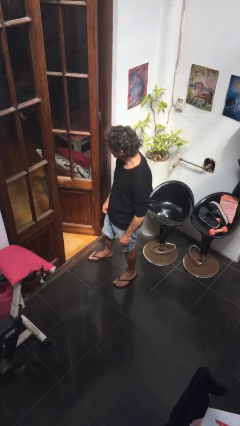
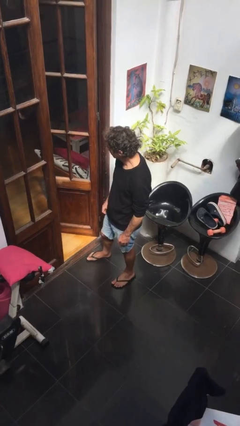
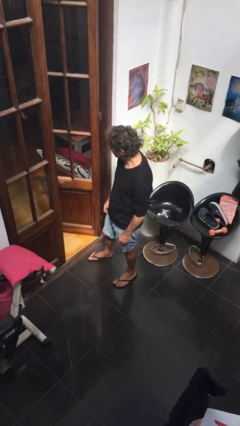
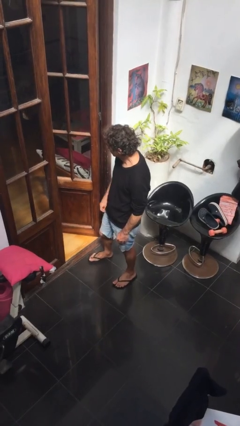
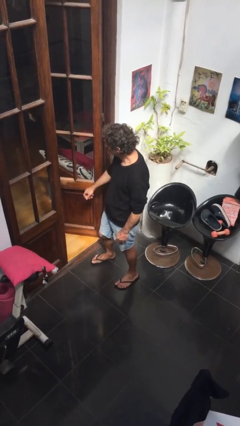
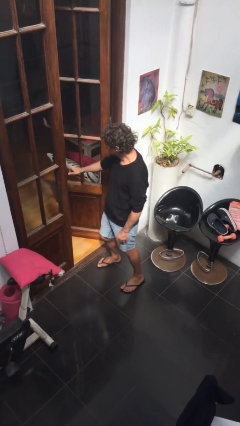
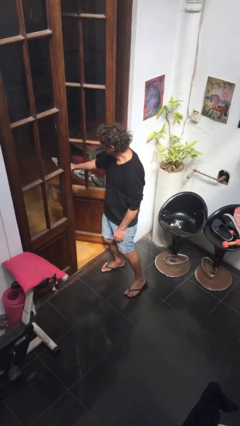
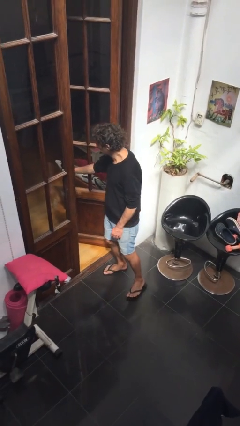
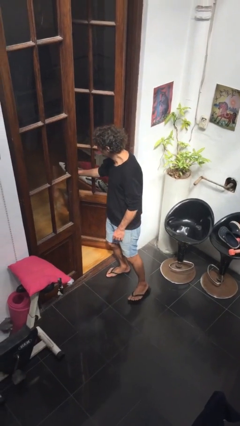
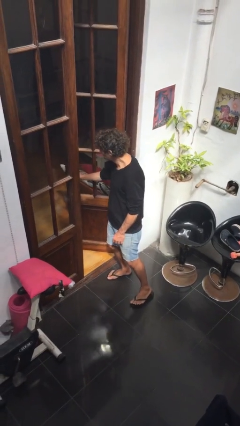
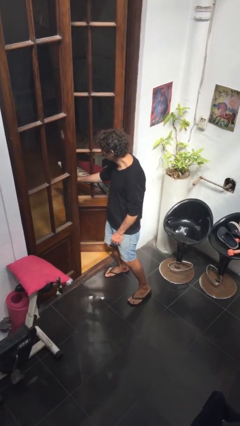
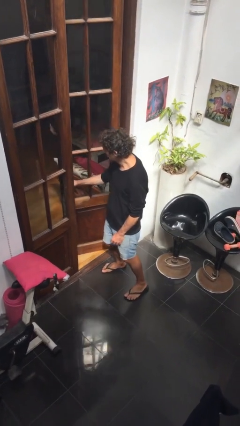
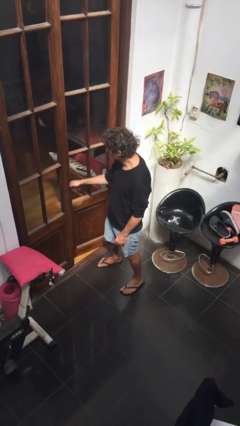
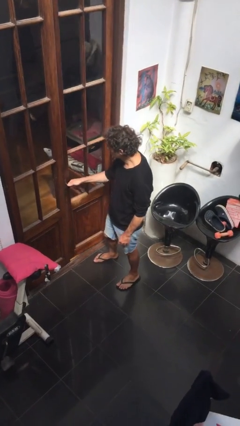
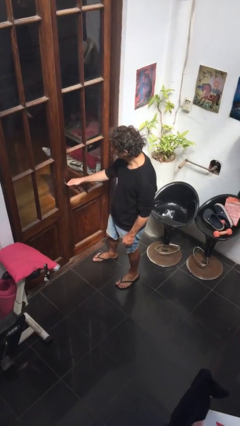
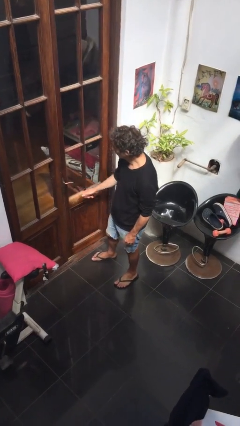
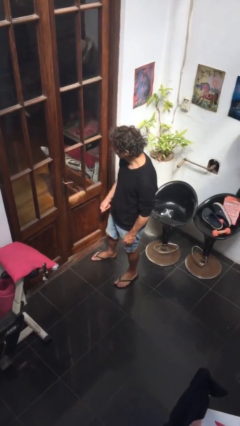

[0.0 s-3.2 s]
person closes facility door

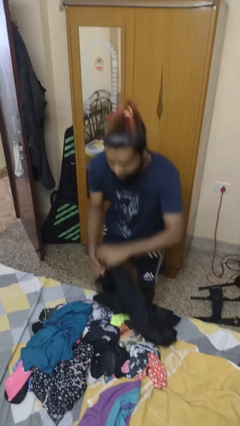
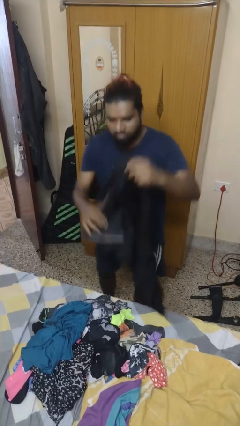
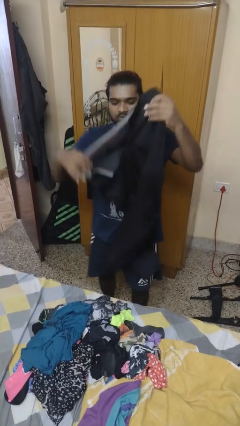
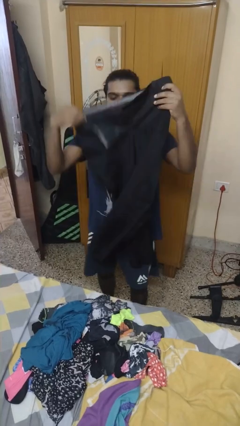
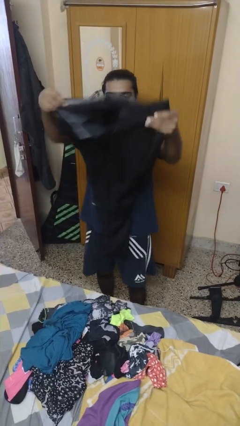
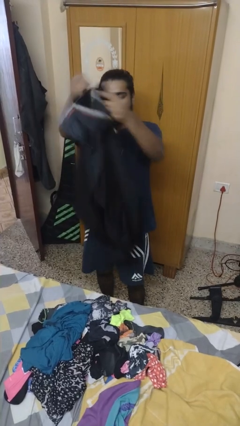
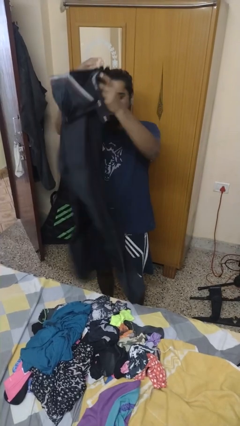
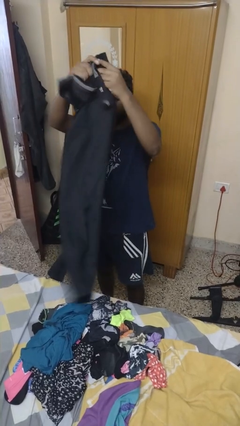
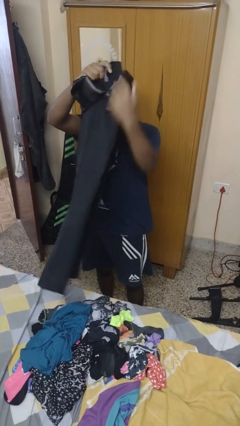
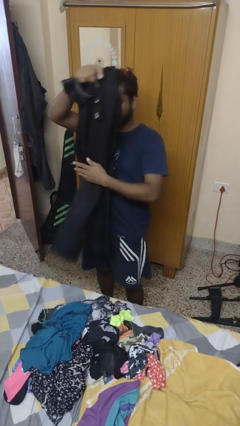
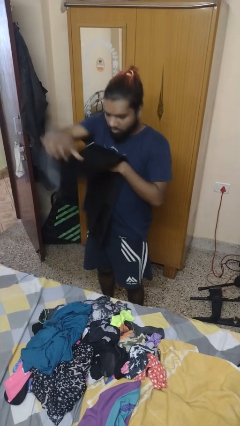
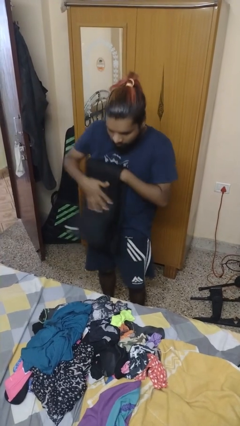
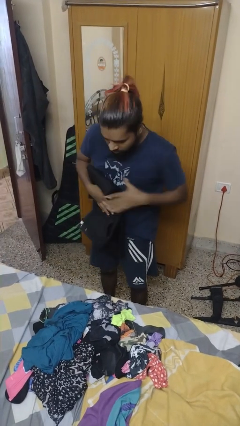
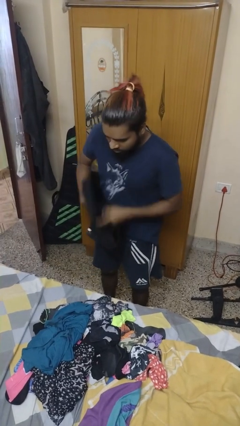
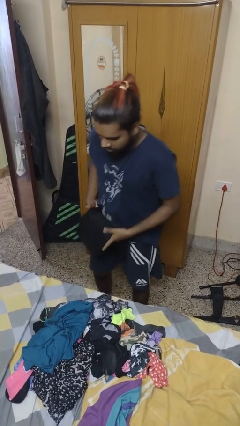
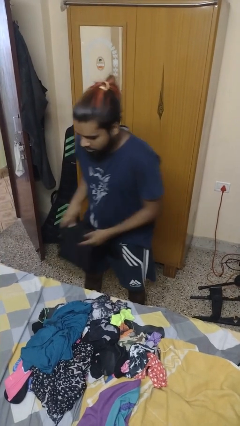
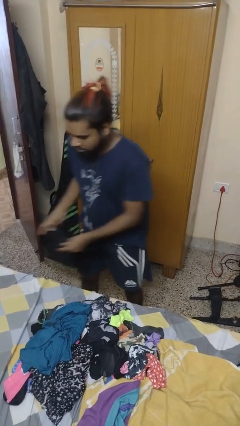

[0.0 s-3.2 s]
person folds pants

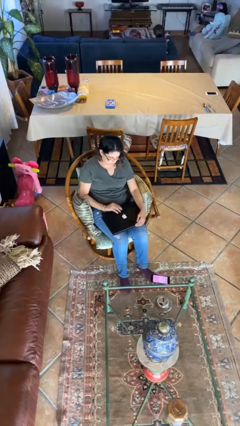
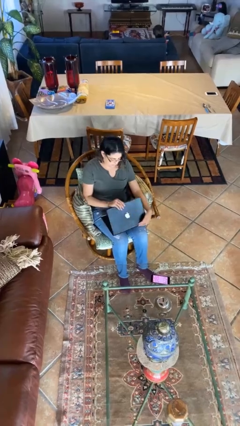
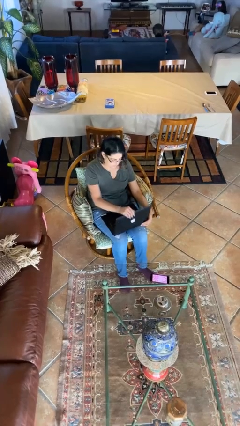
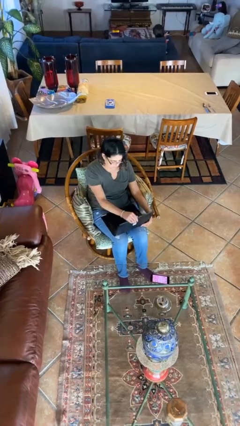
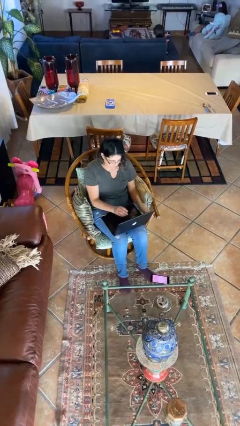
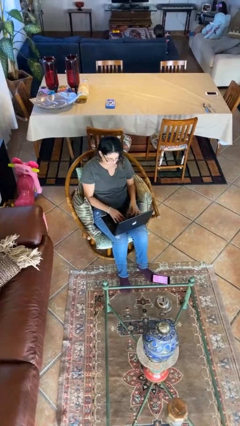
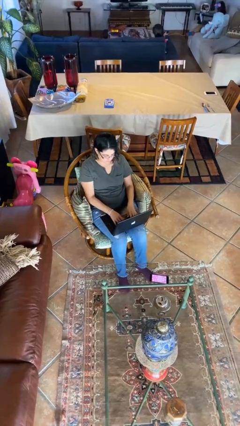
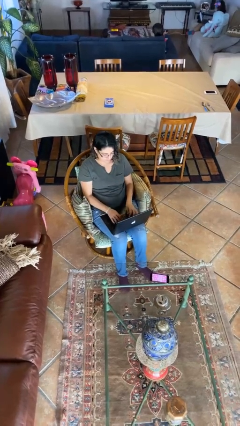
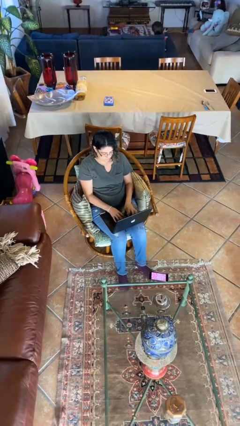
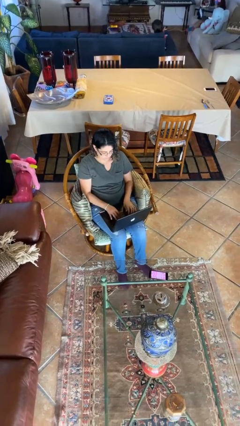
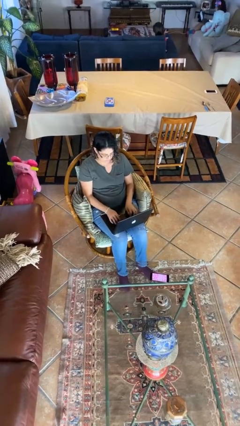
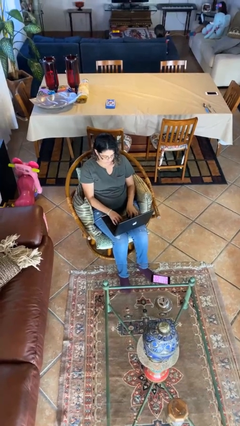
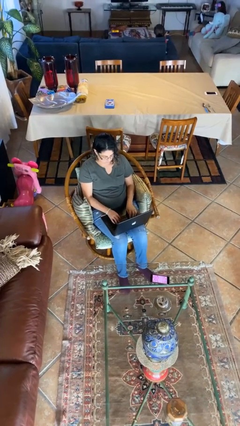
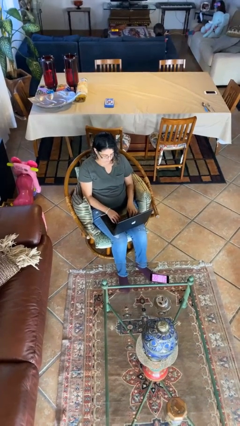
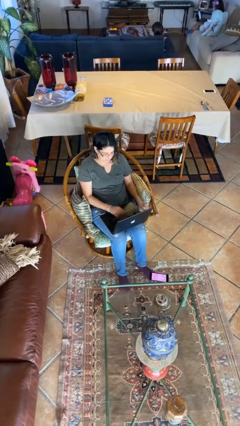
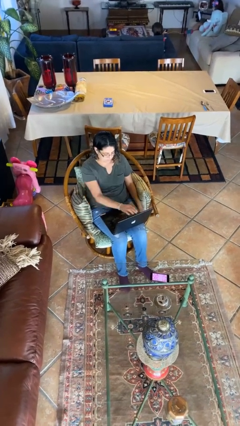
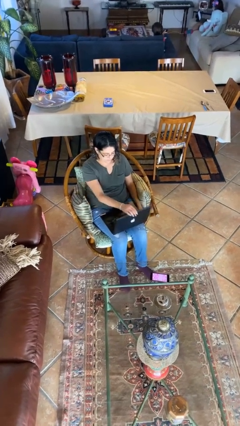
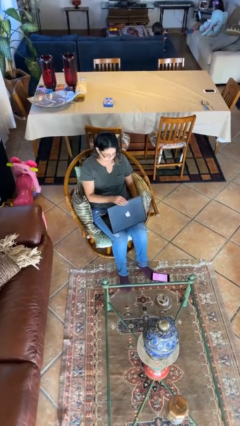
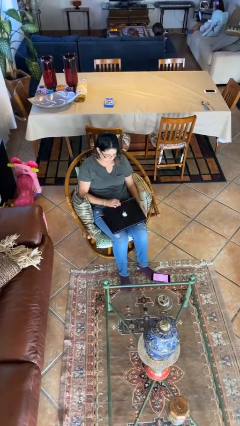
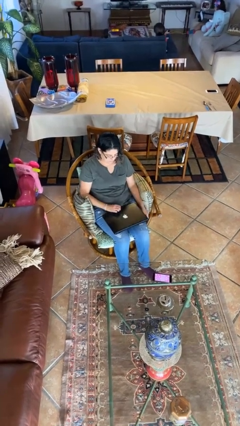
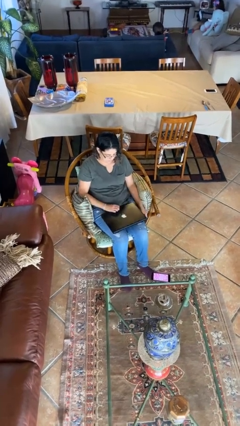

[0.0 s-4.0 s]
person interacts with laptop

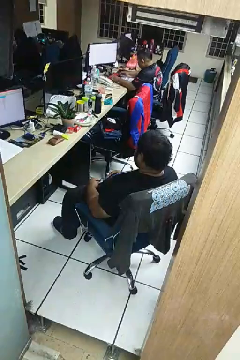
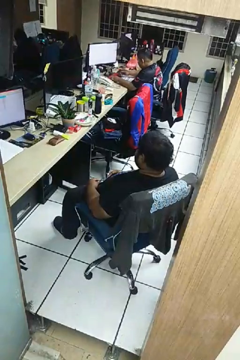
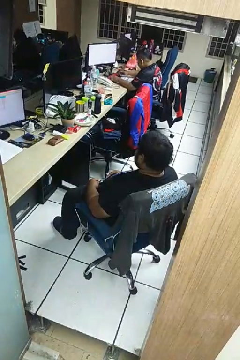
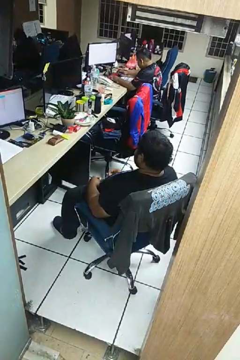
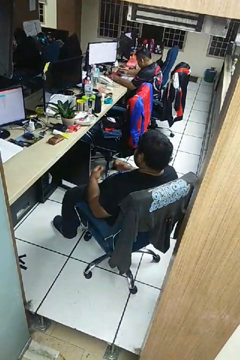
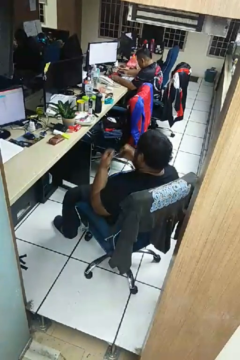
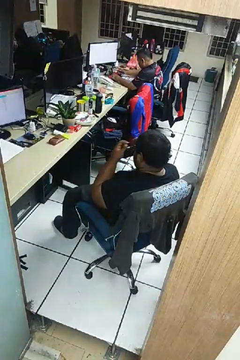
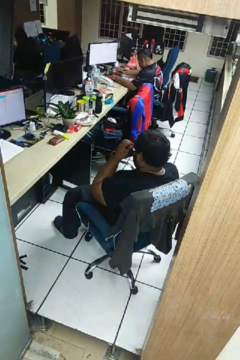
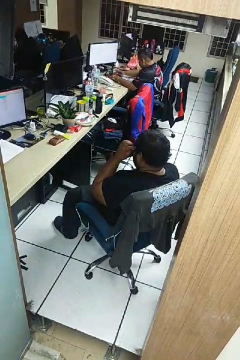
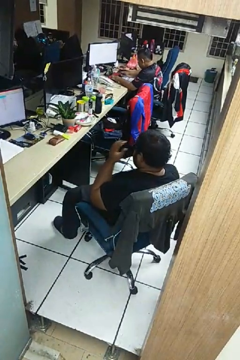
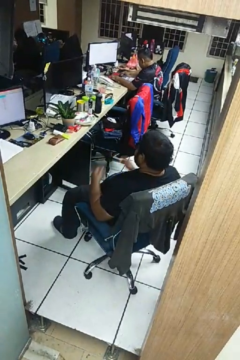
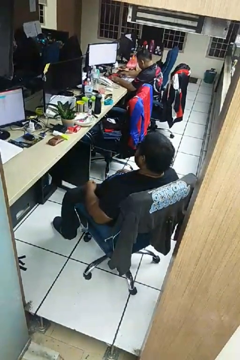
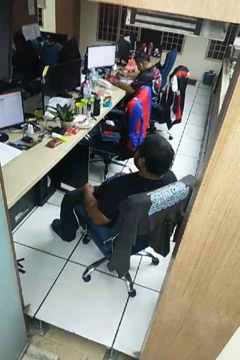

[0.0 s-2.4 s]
person puts on sunglasses

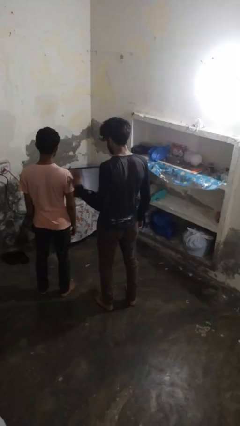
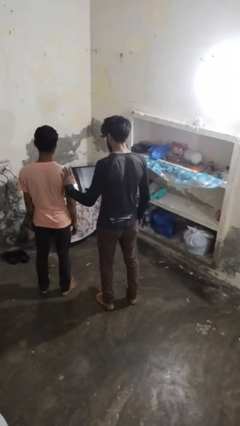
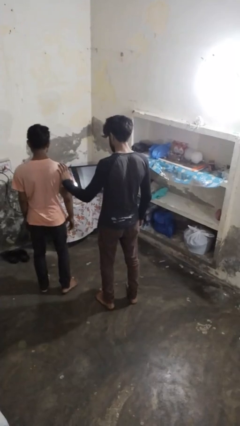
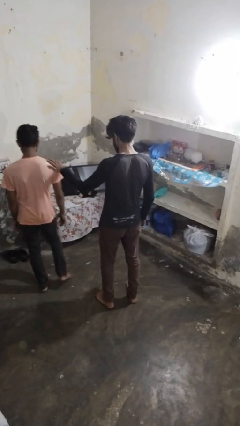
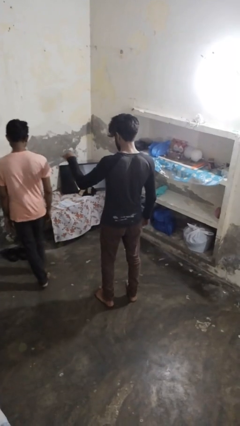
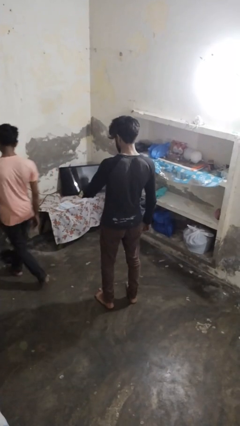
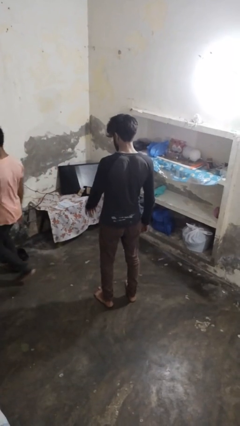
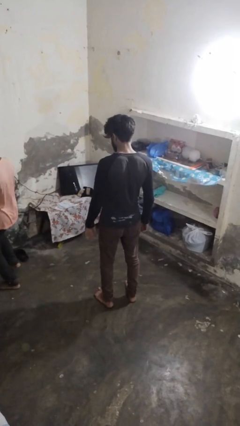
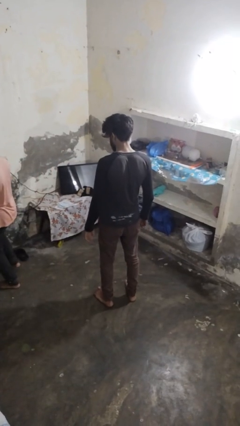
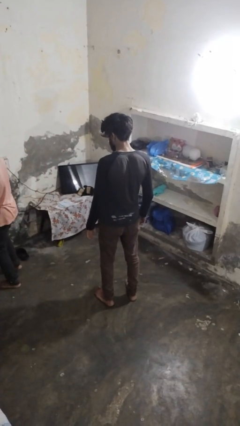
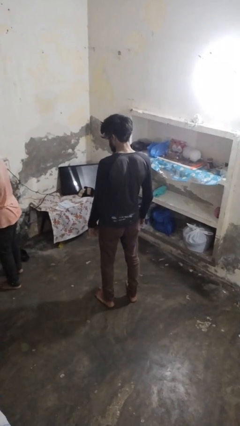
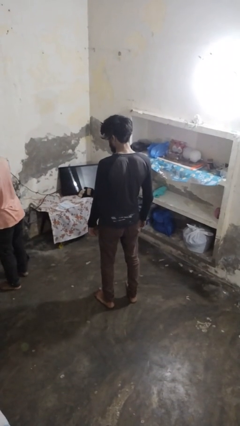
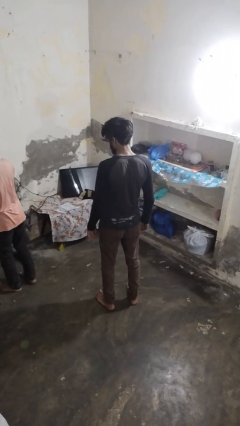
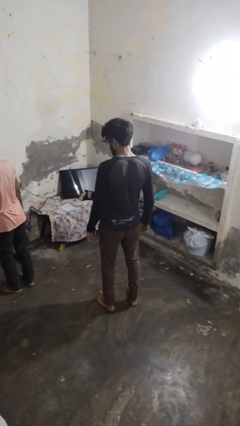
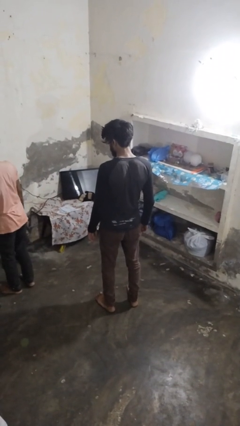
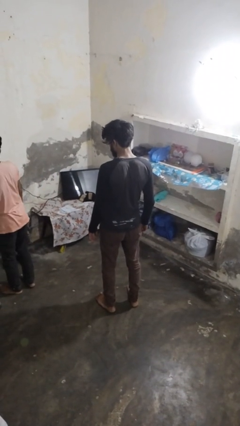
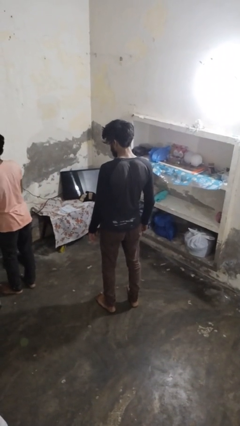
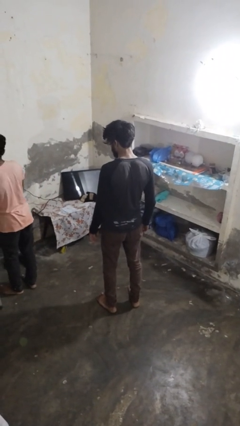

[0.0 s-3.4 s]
person shoves person

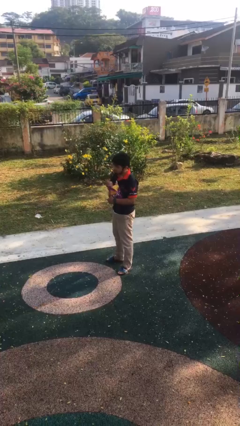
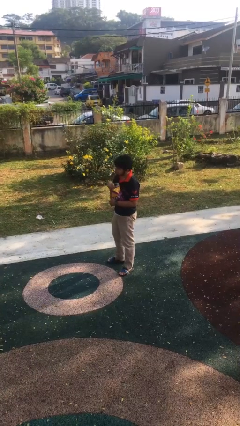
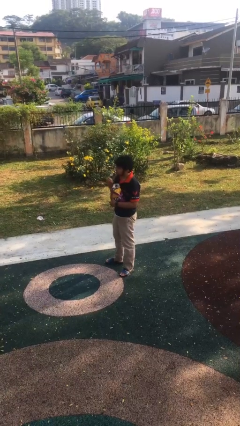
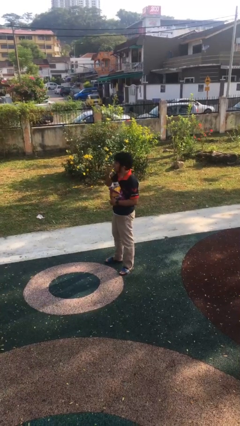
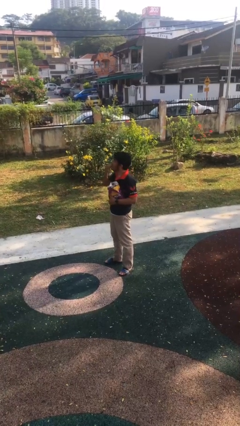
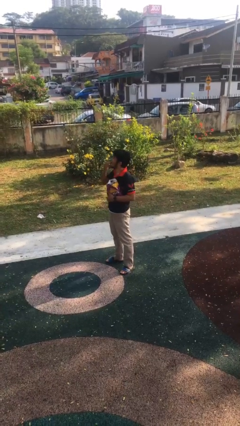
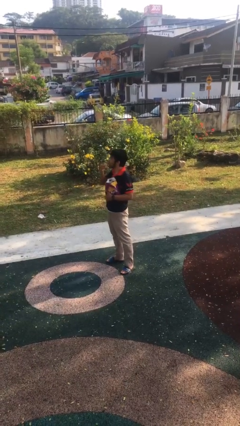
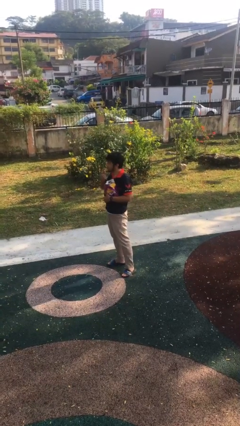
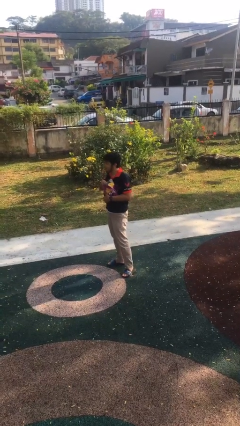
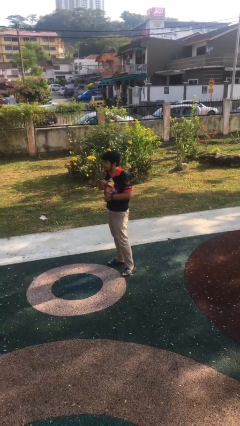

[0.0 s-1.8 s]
person eats snack from bag
